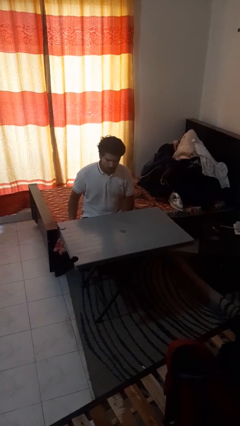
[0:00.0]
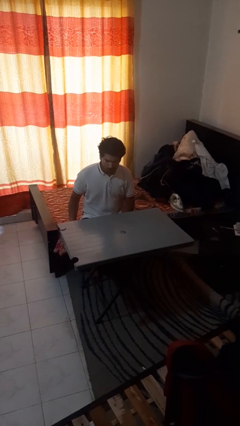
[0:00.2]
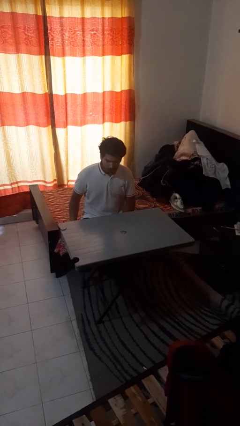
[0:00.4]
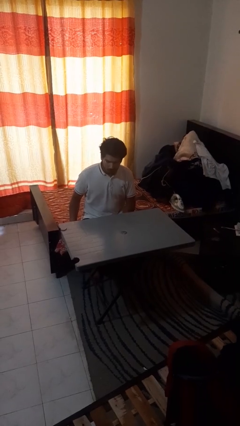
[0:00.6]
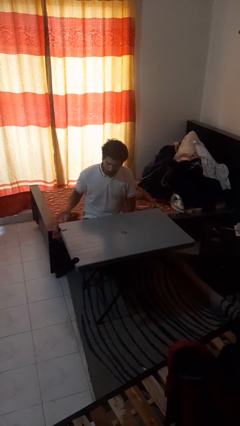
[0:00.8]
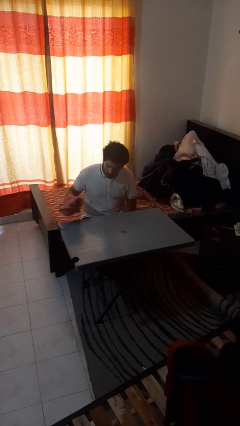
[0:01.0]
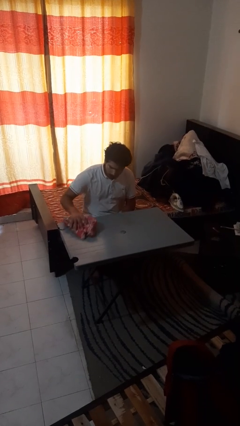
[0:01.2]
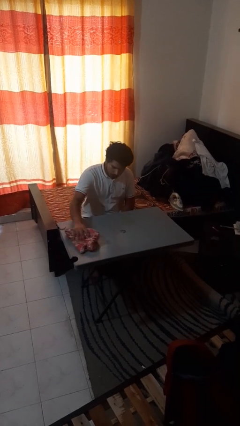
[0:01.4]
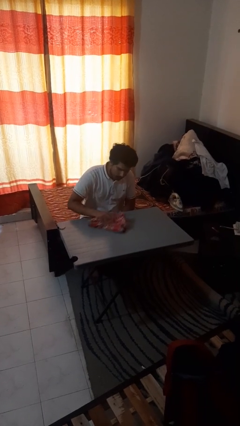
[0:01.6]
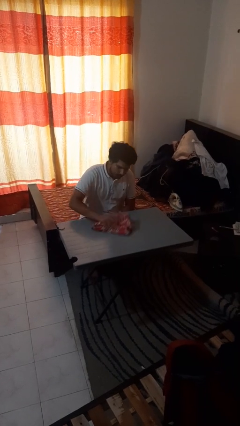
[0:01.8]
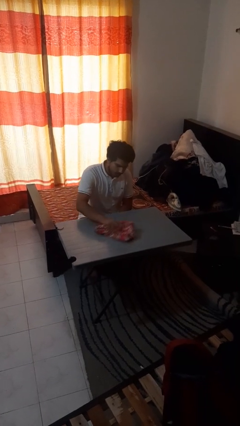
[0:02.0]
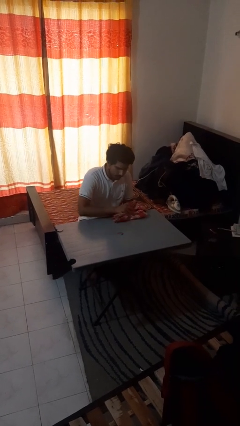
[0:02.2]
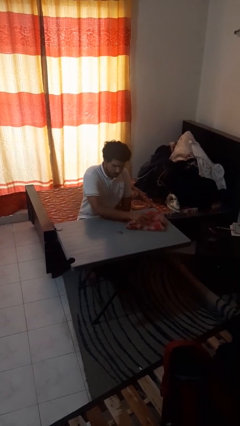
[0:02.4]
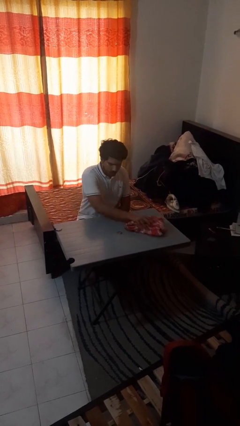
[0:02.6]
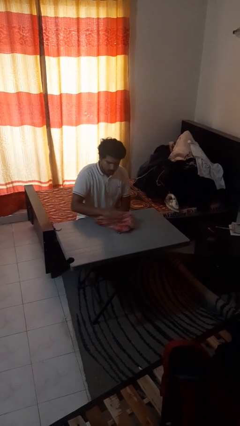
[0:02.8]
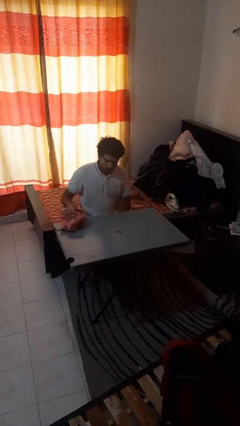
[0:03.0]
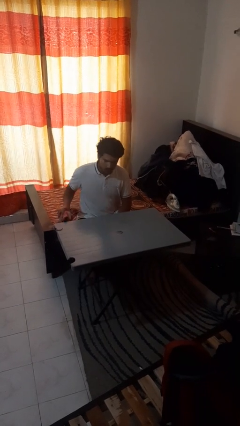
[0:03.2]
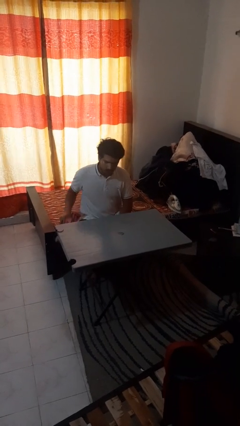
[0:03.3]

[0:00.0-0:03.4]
person cleans table with rag

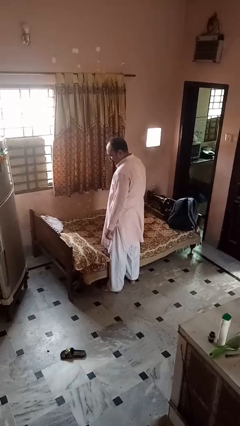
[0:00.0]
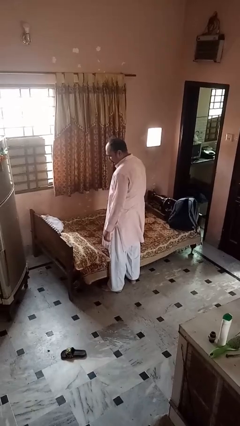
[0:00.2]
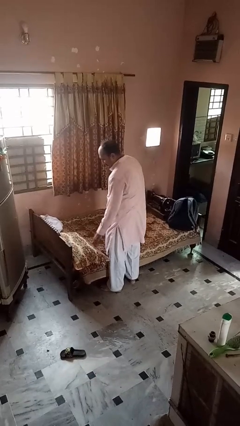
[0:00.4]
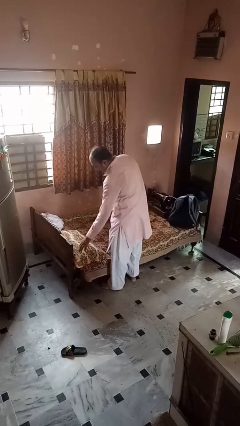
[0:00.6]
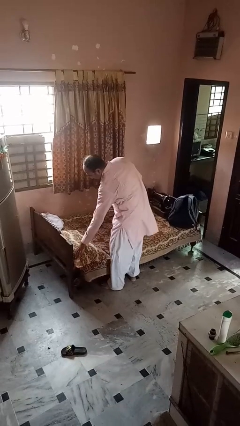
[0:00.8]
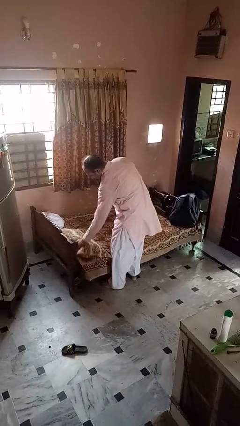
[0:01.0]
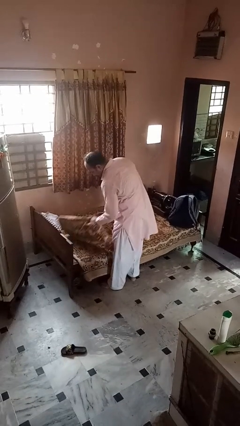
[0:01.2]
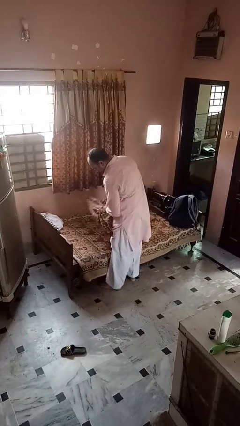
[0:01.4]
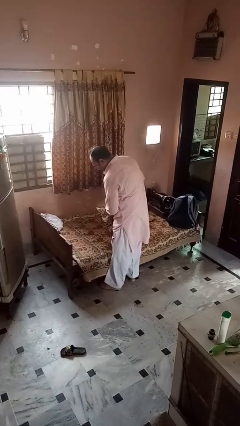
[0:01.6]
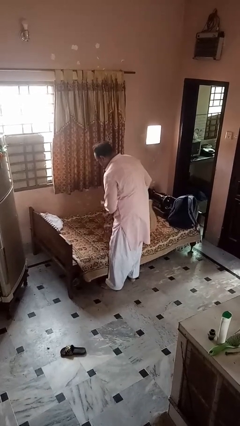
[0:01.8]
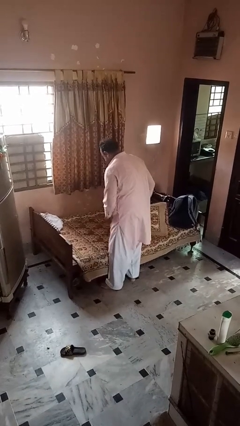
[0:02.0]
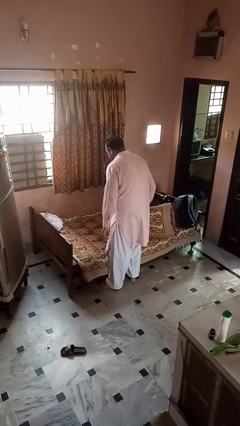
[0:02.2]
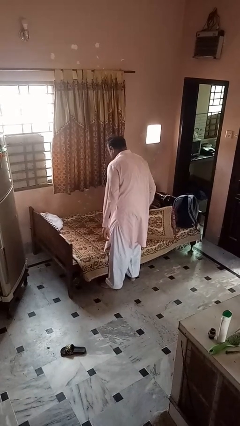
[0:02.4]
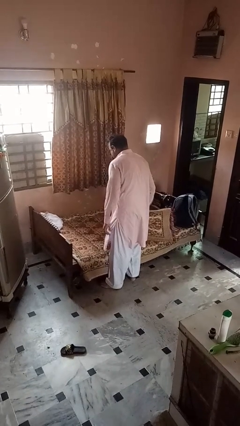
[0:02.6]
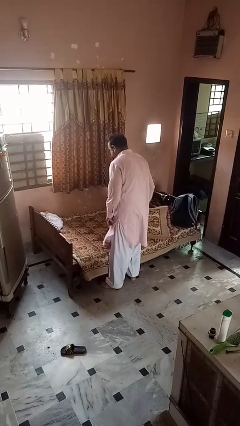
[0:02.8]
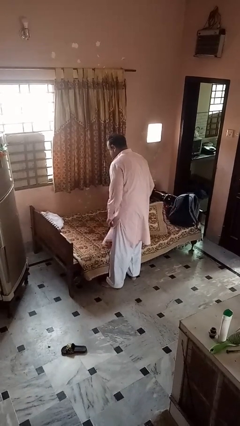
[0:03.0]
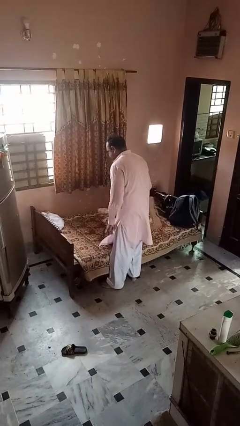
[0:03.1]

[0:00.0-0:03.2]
person searches under bed

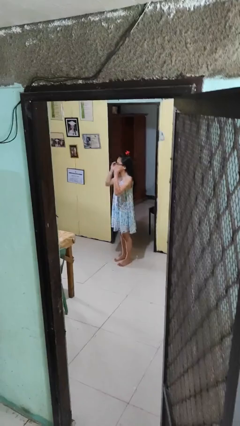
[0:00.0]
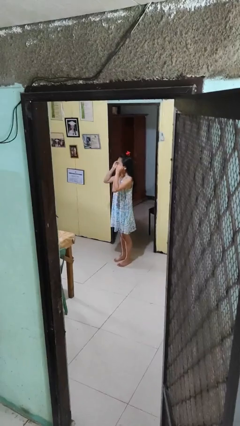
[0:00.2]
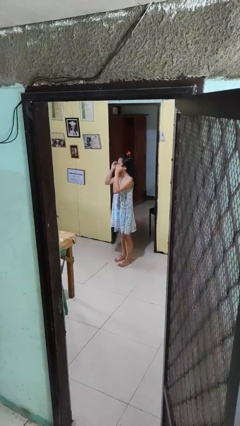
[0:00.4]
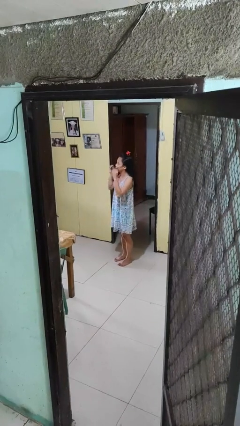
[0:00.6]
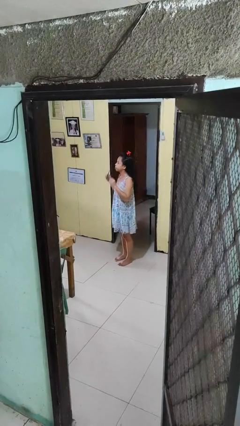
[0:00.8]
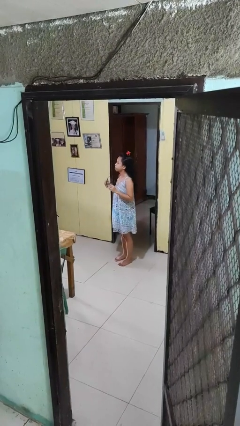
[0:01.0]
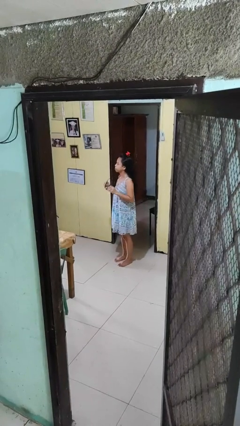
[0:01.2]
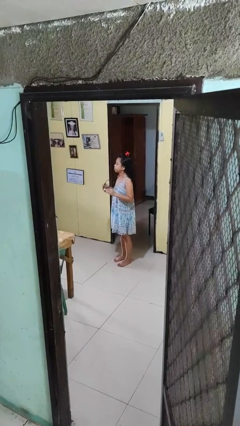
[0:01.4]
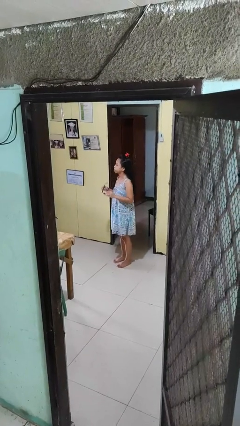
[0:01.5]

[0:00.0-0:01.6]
person takes off glasses

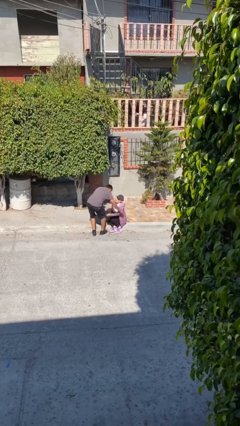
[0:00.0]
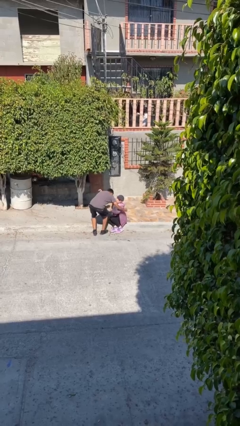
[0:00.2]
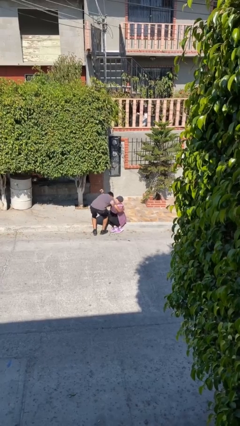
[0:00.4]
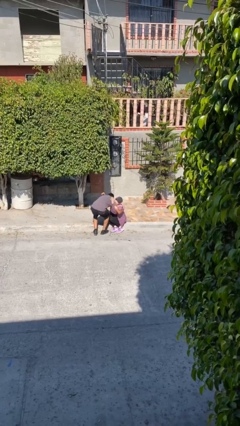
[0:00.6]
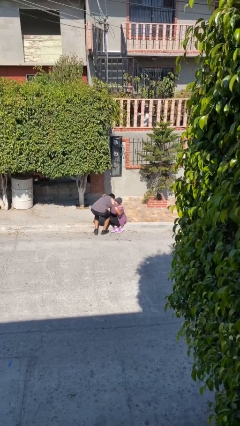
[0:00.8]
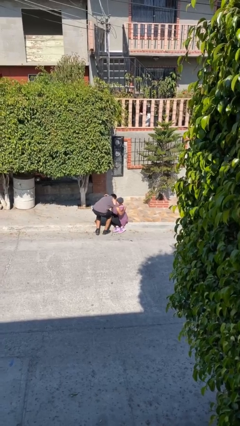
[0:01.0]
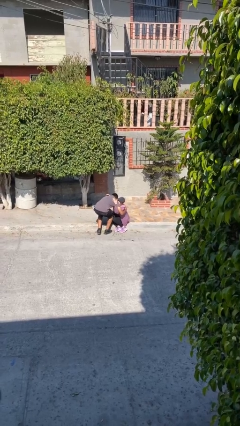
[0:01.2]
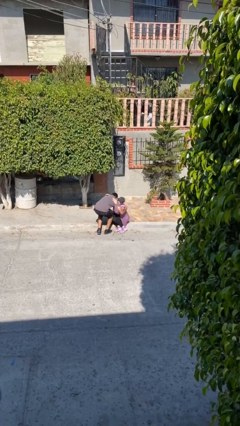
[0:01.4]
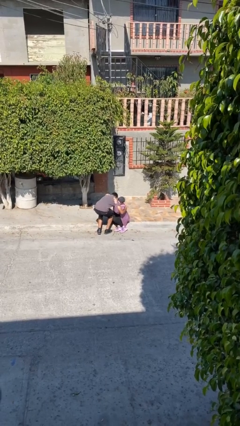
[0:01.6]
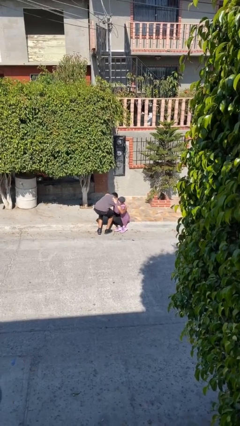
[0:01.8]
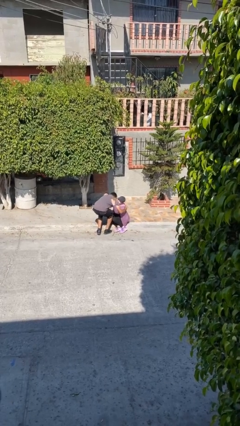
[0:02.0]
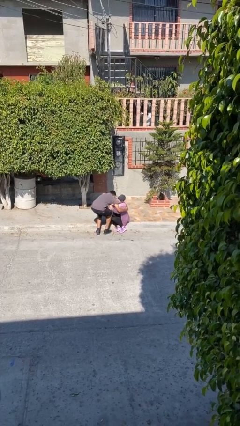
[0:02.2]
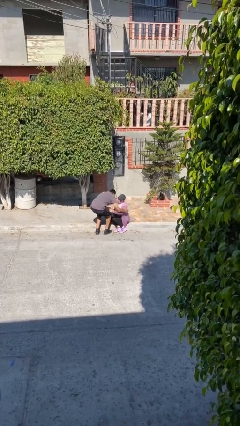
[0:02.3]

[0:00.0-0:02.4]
person embraces person

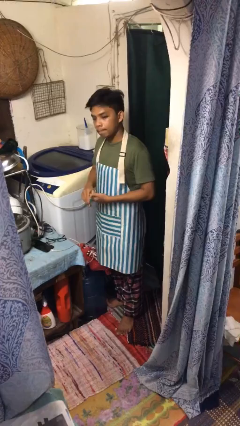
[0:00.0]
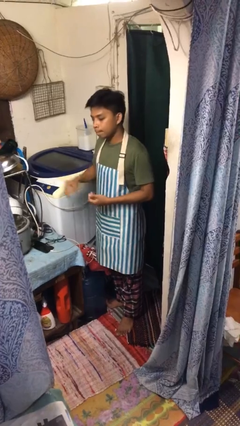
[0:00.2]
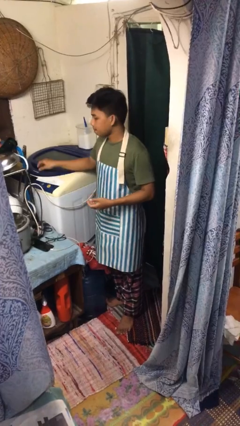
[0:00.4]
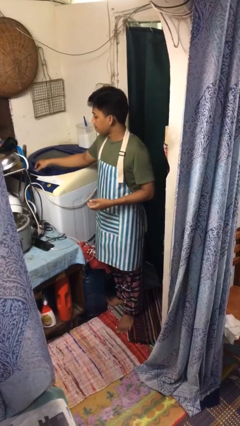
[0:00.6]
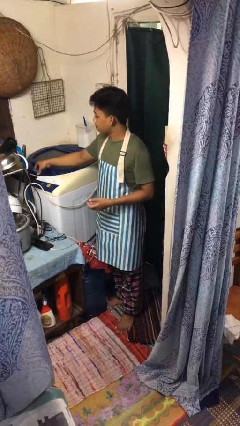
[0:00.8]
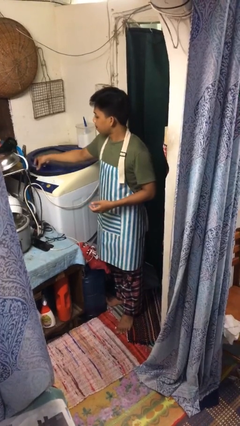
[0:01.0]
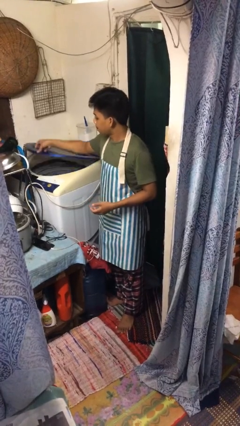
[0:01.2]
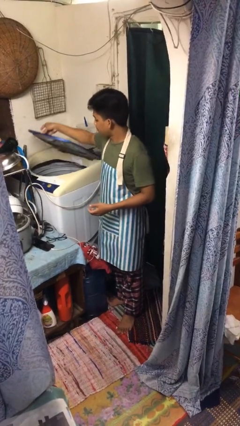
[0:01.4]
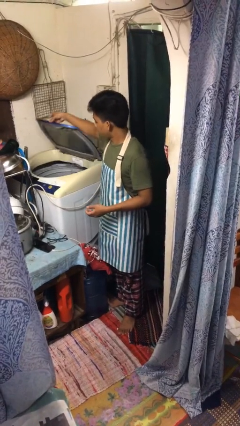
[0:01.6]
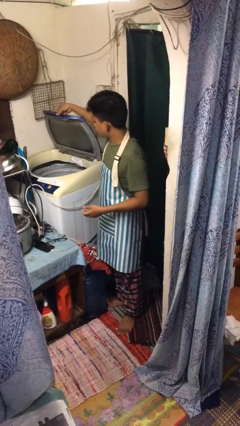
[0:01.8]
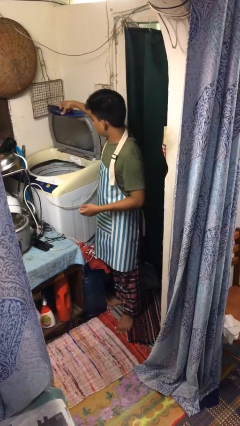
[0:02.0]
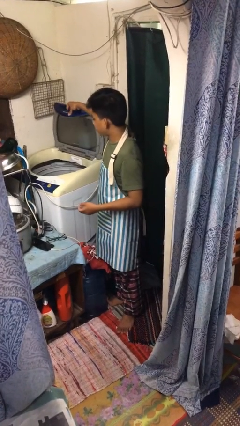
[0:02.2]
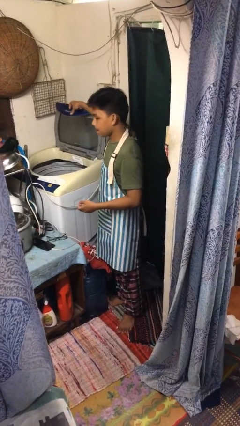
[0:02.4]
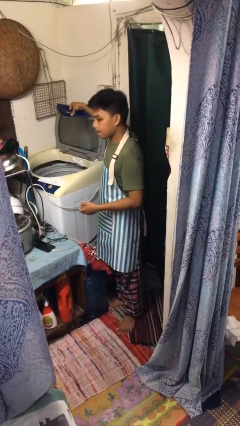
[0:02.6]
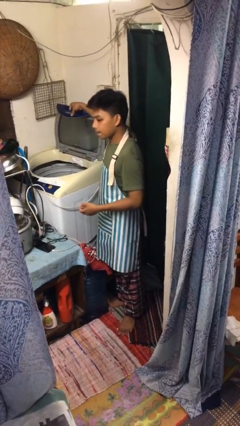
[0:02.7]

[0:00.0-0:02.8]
person opens clothes washer

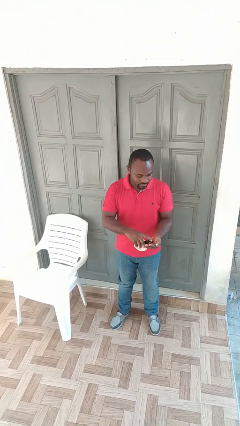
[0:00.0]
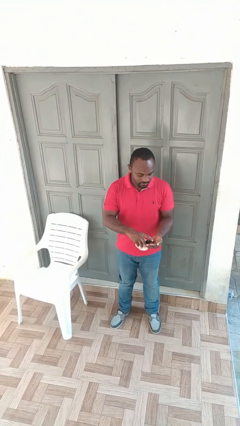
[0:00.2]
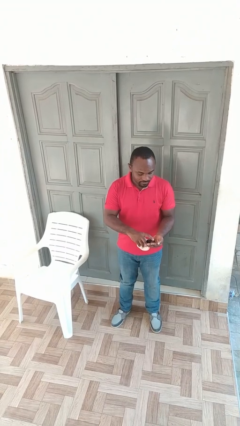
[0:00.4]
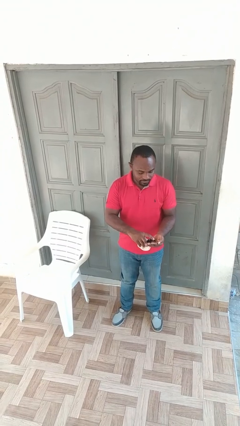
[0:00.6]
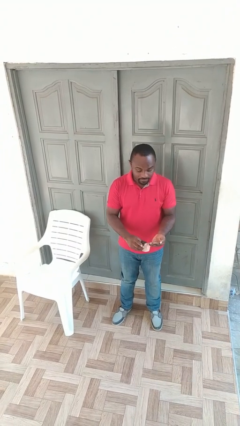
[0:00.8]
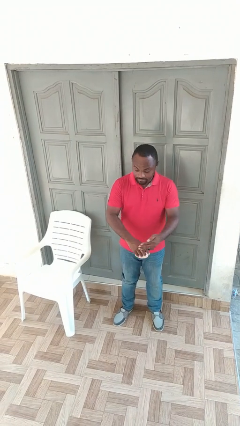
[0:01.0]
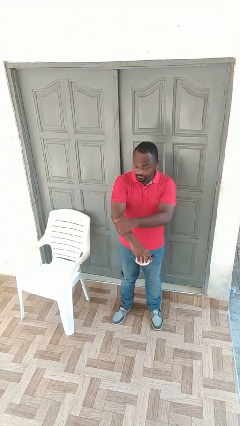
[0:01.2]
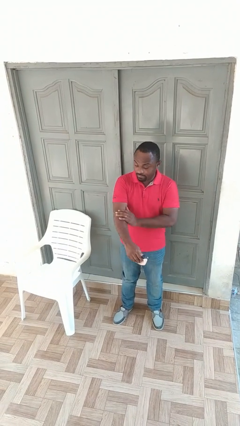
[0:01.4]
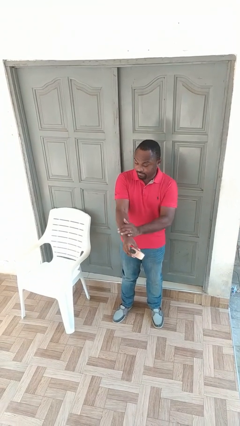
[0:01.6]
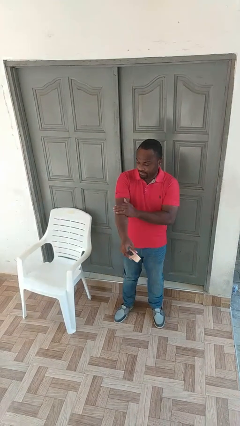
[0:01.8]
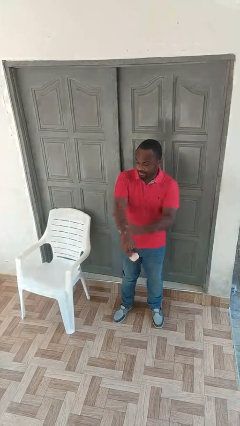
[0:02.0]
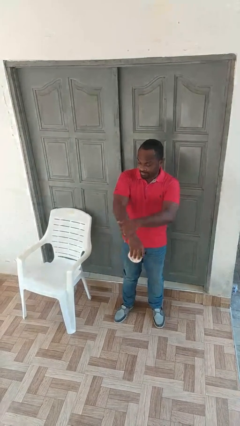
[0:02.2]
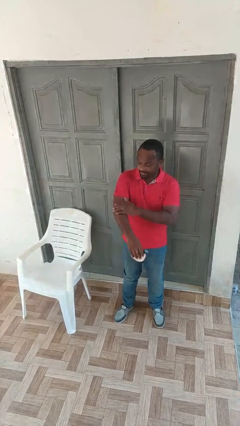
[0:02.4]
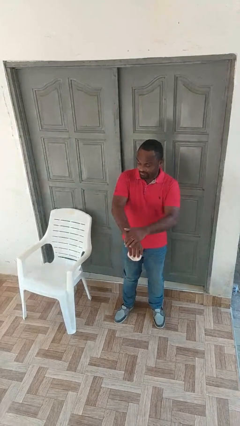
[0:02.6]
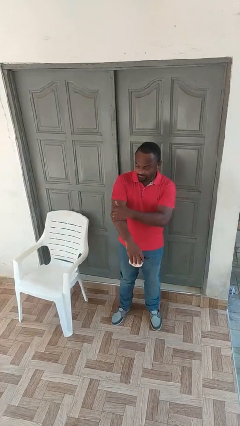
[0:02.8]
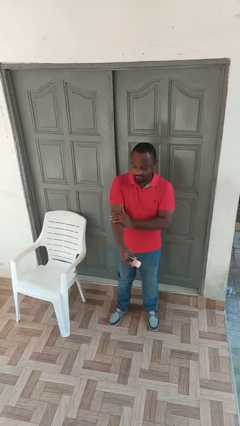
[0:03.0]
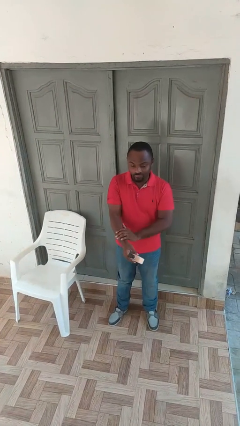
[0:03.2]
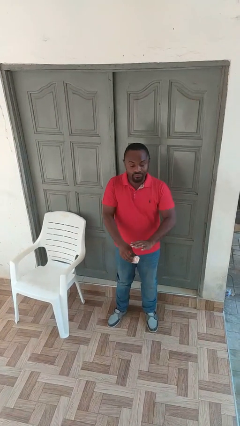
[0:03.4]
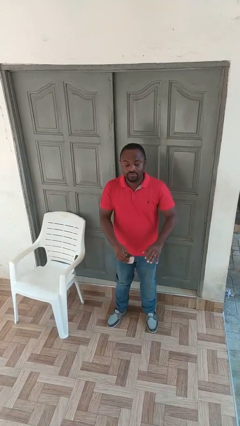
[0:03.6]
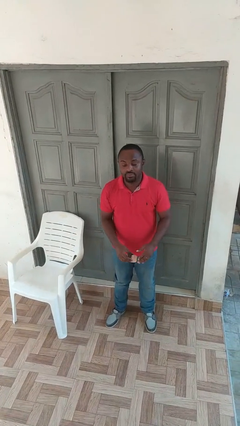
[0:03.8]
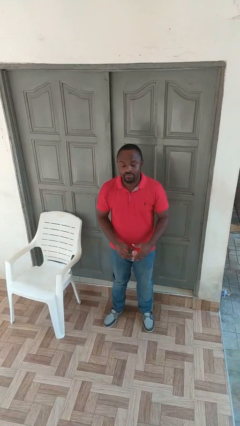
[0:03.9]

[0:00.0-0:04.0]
person applies sunscreen

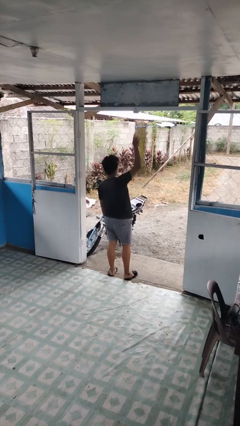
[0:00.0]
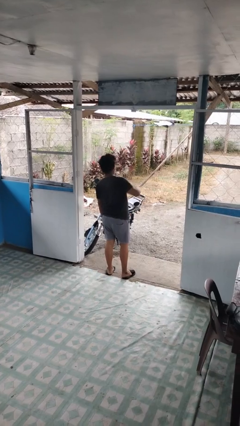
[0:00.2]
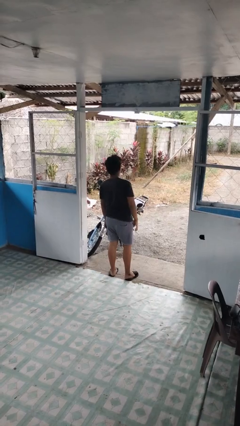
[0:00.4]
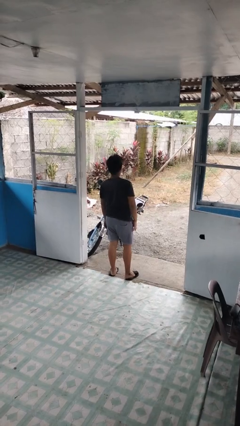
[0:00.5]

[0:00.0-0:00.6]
person gestures lower hand
